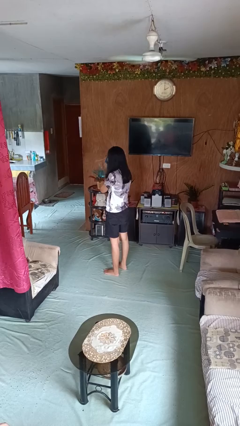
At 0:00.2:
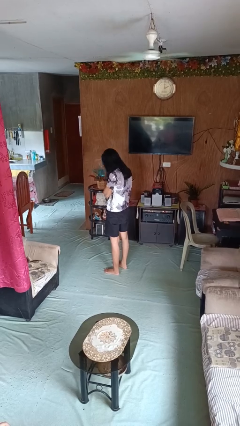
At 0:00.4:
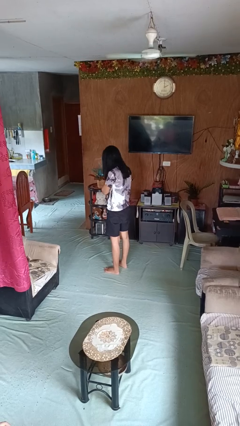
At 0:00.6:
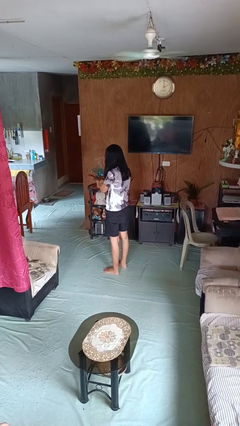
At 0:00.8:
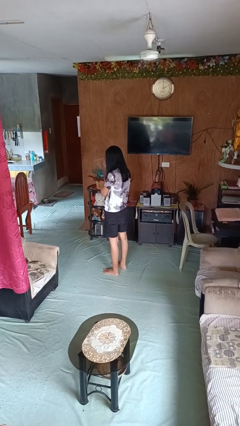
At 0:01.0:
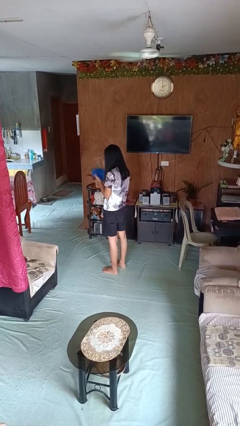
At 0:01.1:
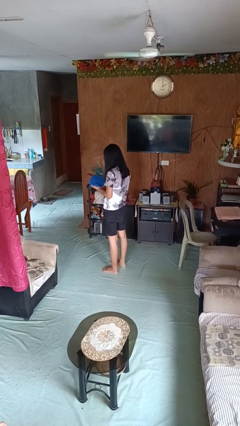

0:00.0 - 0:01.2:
person blows nose

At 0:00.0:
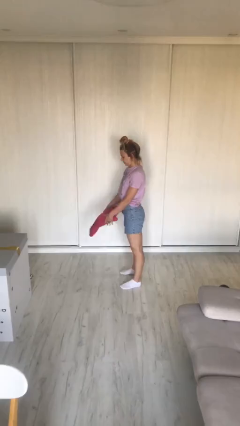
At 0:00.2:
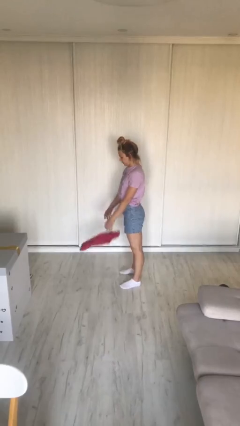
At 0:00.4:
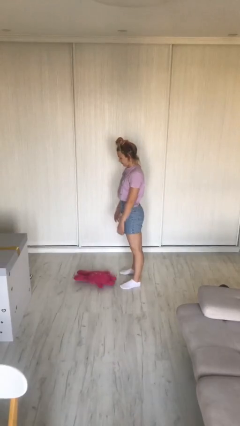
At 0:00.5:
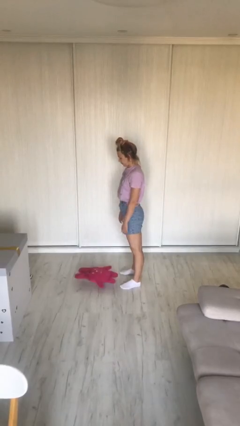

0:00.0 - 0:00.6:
person drops object

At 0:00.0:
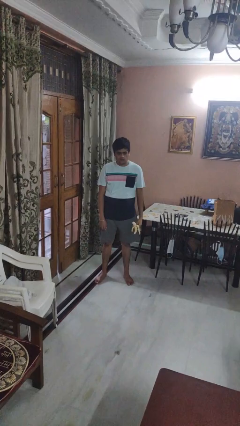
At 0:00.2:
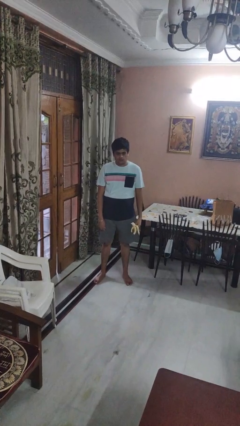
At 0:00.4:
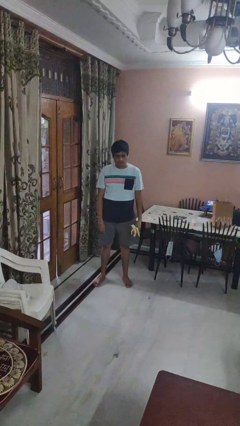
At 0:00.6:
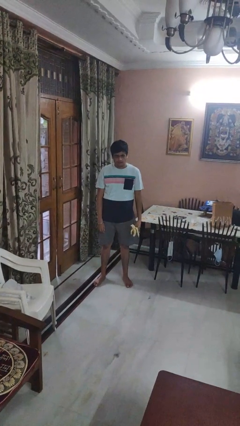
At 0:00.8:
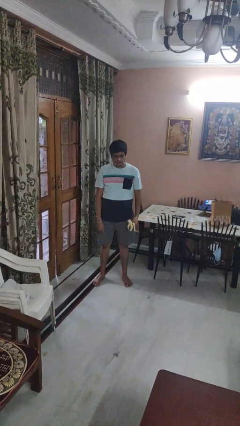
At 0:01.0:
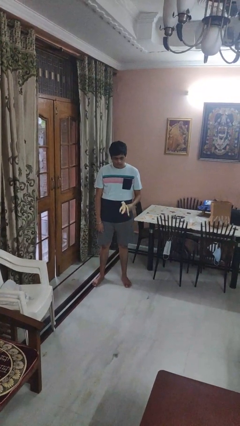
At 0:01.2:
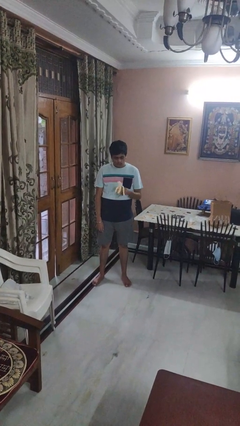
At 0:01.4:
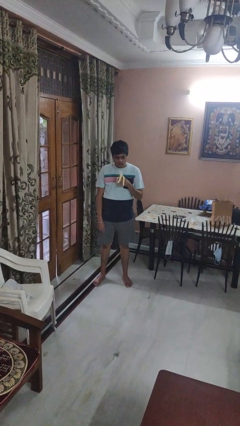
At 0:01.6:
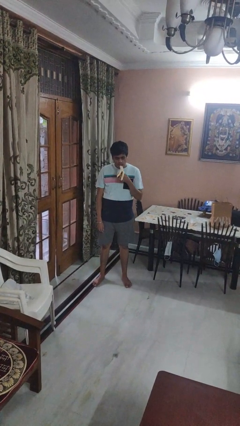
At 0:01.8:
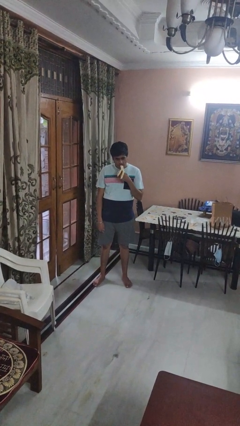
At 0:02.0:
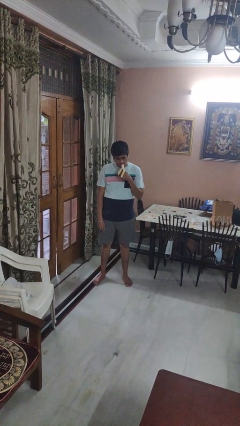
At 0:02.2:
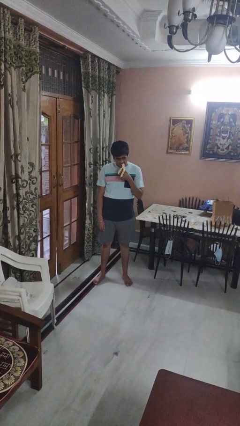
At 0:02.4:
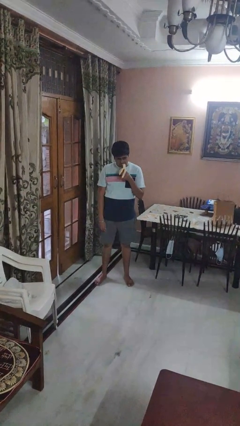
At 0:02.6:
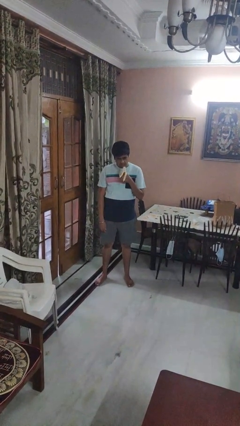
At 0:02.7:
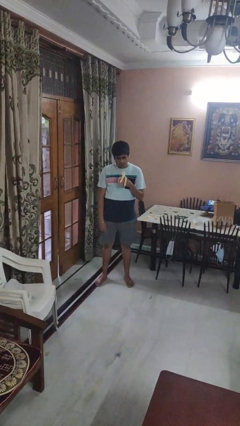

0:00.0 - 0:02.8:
person eats banana

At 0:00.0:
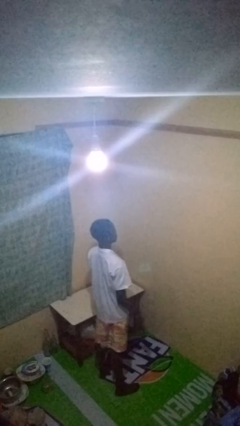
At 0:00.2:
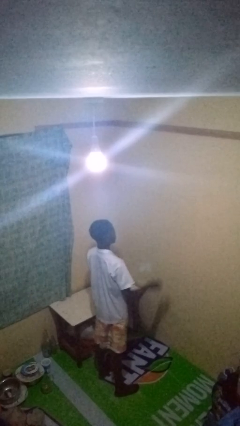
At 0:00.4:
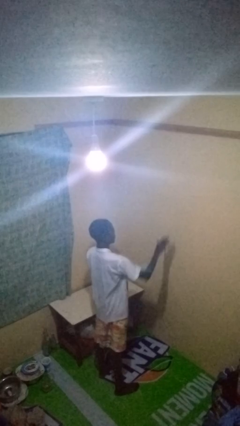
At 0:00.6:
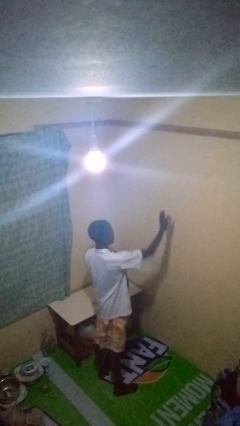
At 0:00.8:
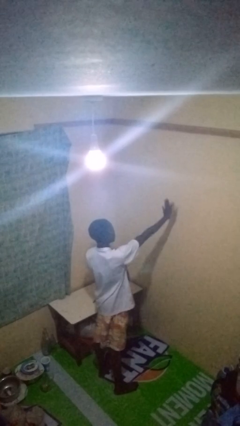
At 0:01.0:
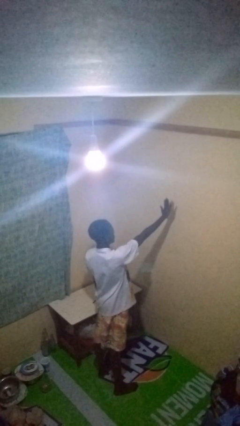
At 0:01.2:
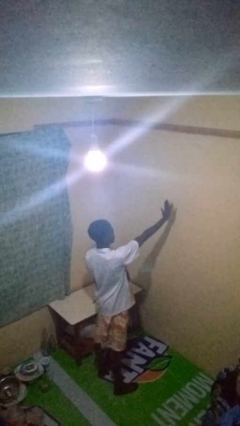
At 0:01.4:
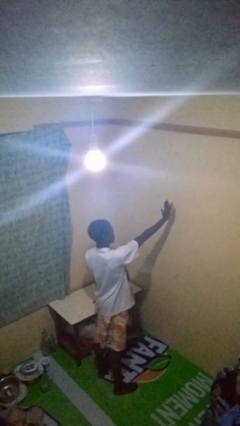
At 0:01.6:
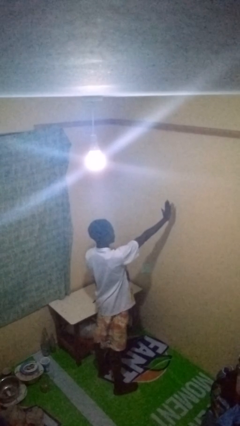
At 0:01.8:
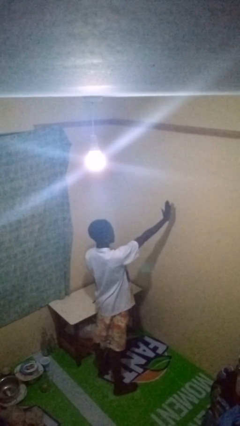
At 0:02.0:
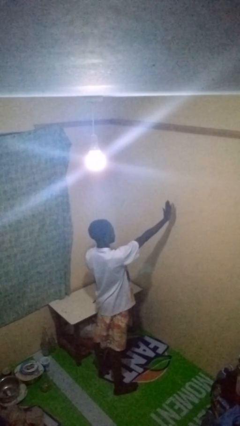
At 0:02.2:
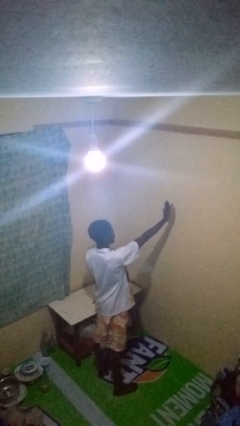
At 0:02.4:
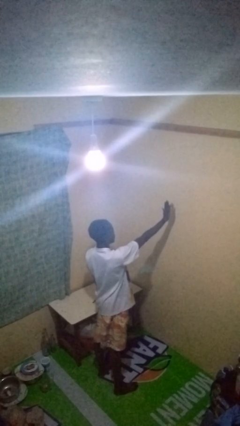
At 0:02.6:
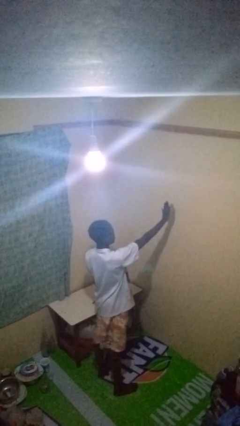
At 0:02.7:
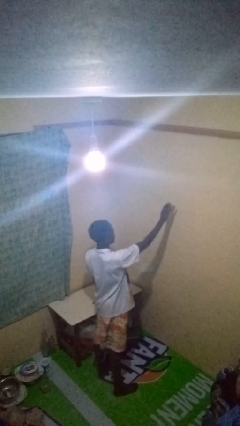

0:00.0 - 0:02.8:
person gestures stop

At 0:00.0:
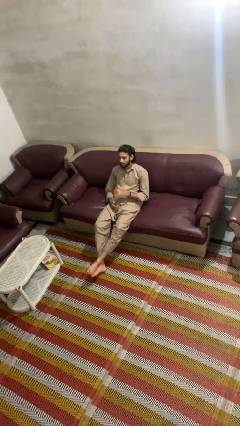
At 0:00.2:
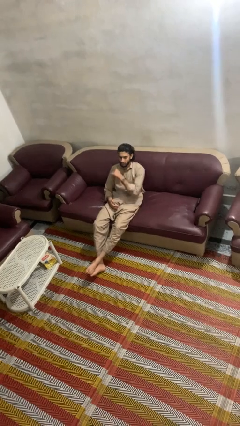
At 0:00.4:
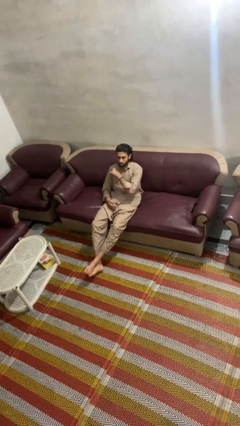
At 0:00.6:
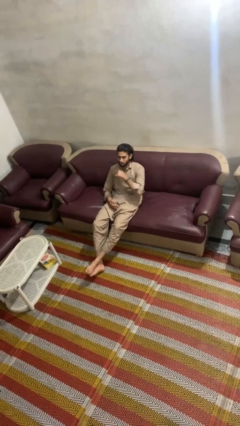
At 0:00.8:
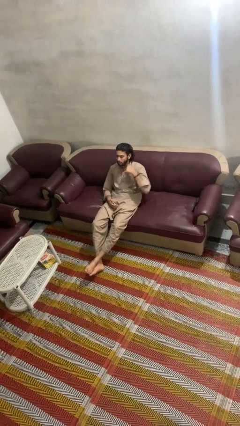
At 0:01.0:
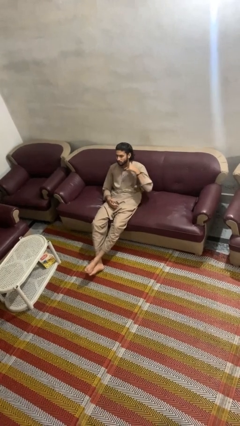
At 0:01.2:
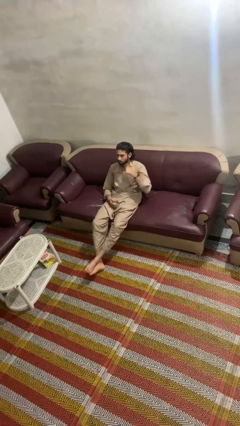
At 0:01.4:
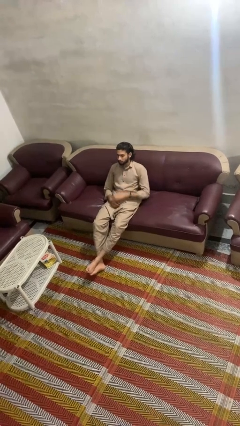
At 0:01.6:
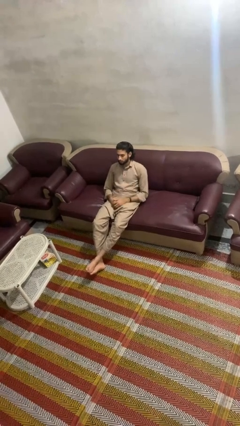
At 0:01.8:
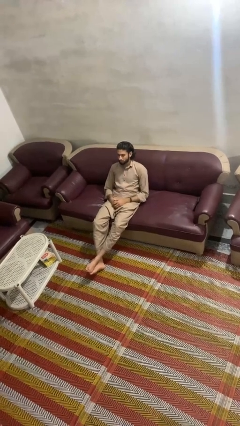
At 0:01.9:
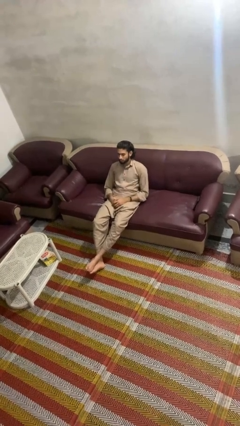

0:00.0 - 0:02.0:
person gestures cut

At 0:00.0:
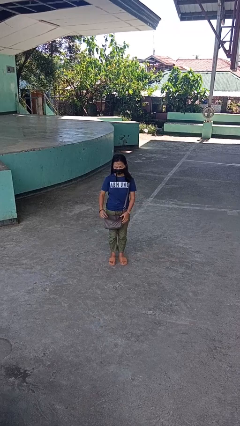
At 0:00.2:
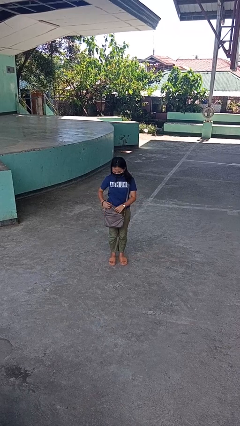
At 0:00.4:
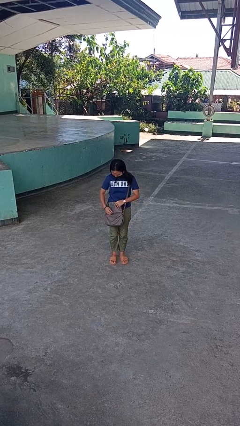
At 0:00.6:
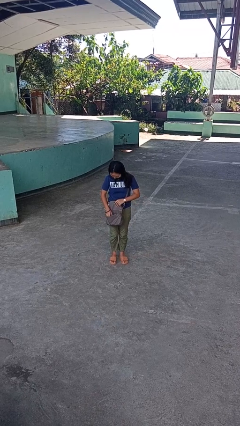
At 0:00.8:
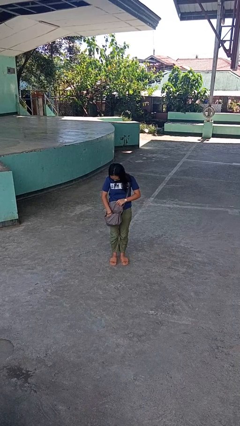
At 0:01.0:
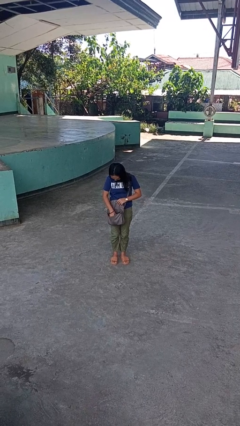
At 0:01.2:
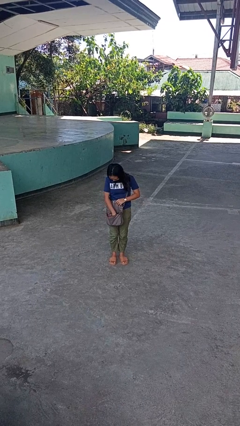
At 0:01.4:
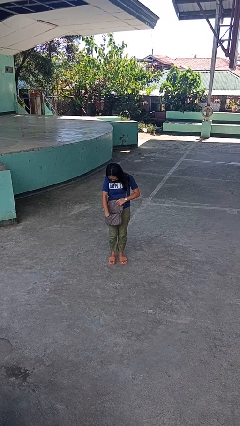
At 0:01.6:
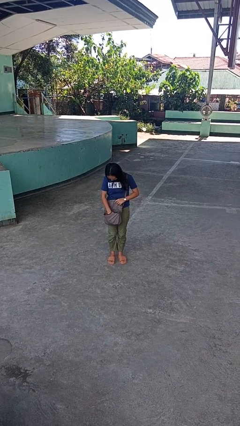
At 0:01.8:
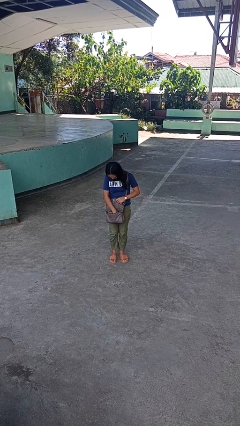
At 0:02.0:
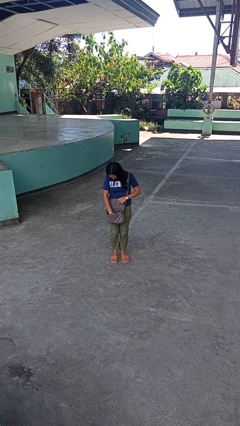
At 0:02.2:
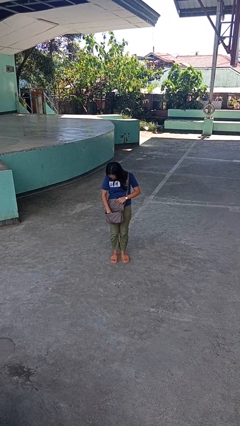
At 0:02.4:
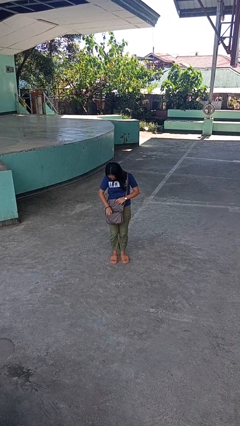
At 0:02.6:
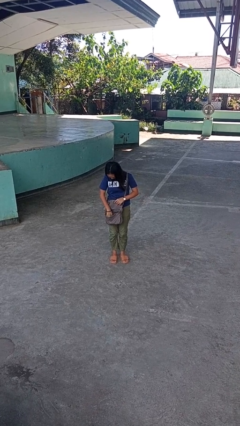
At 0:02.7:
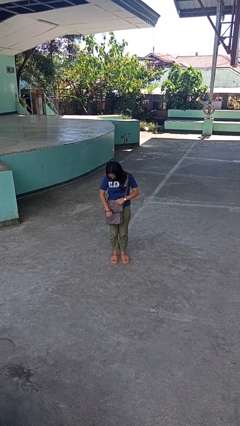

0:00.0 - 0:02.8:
person searches in purse

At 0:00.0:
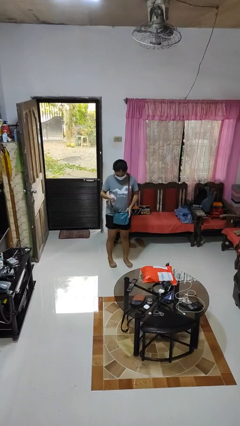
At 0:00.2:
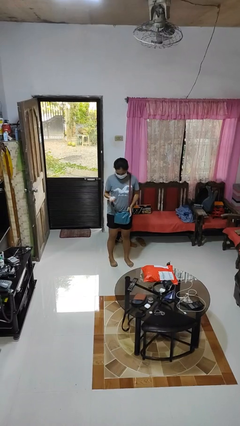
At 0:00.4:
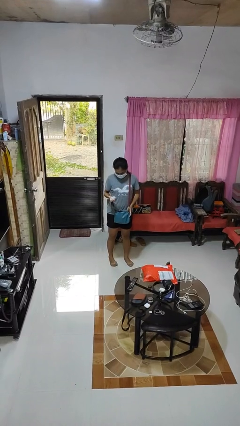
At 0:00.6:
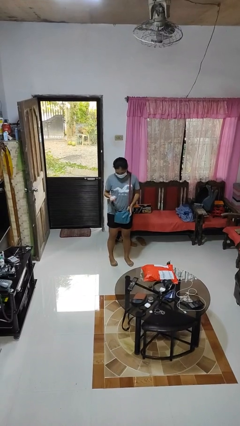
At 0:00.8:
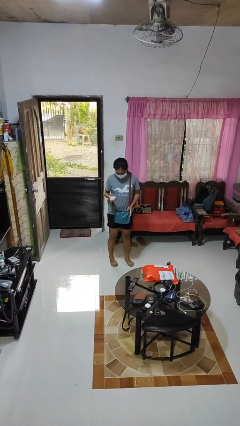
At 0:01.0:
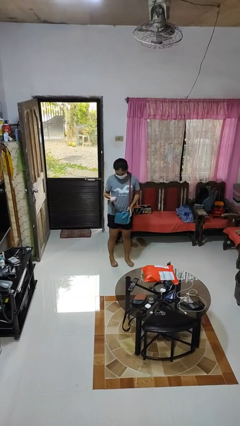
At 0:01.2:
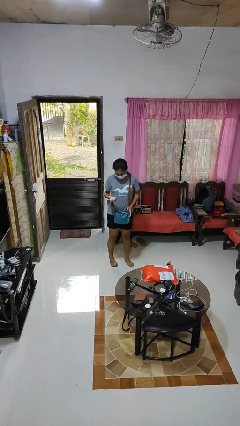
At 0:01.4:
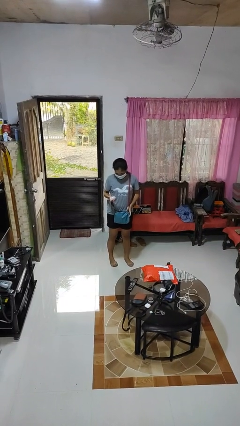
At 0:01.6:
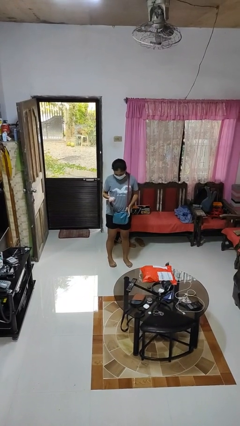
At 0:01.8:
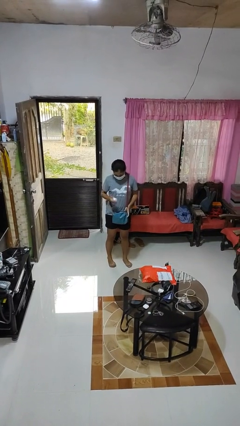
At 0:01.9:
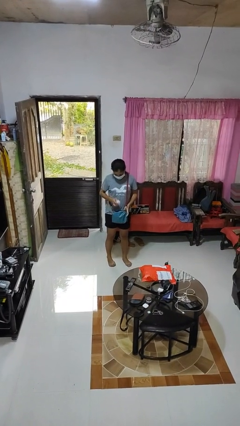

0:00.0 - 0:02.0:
person takes object from purse

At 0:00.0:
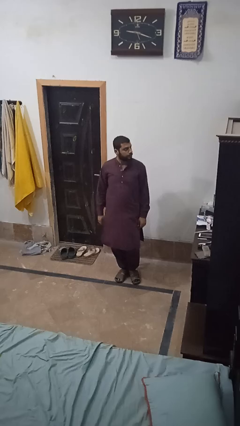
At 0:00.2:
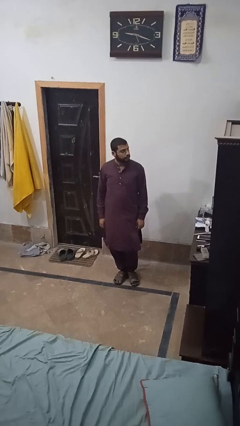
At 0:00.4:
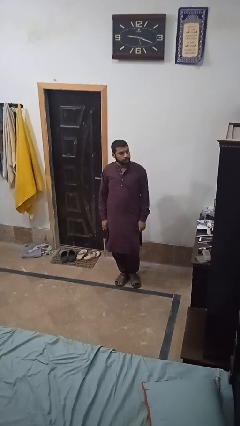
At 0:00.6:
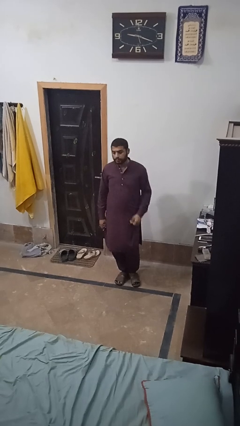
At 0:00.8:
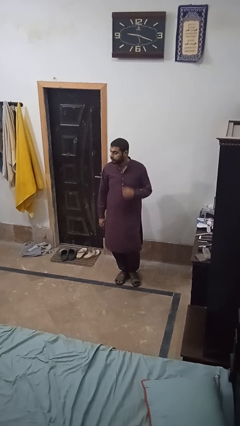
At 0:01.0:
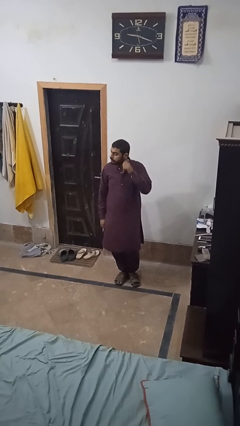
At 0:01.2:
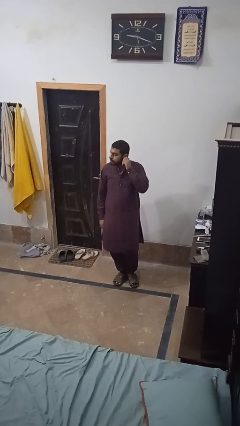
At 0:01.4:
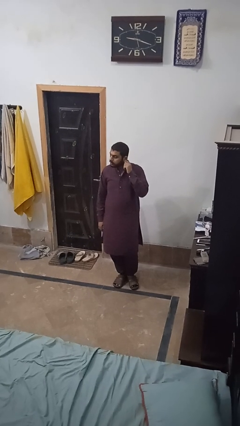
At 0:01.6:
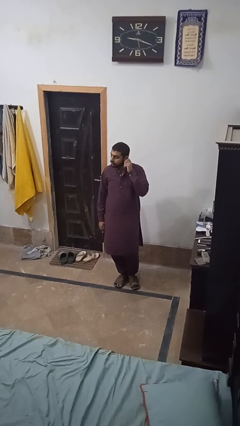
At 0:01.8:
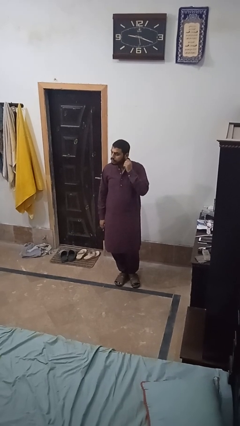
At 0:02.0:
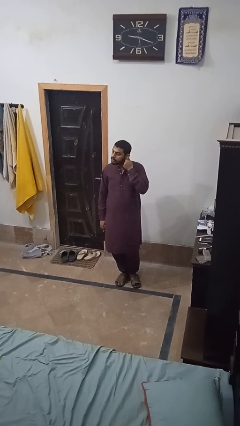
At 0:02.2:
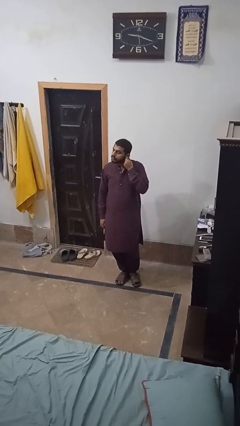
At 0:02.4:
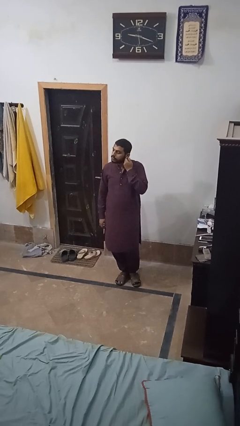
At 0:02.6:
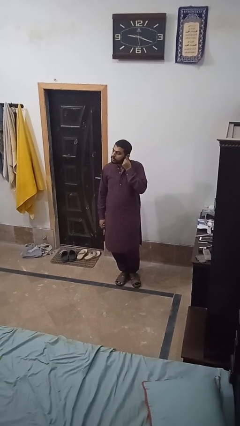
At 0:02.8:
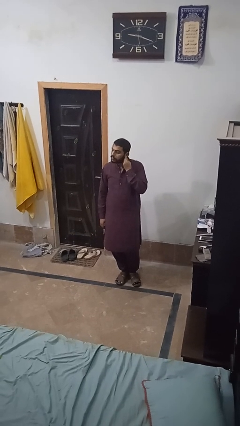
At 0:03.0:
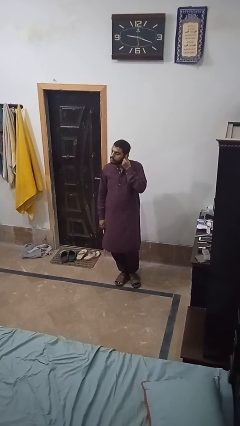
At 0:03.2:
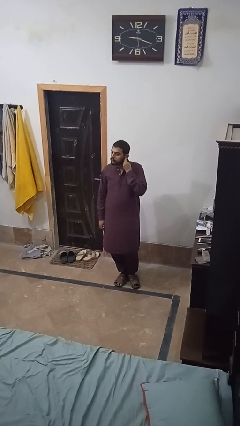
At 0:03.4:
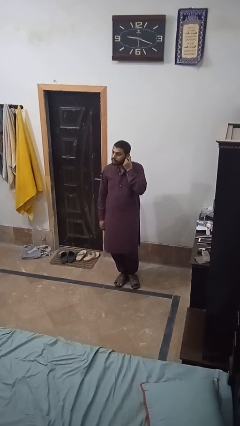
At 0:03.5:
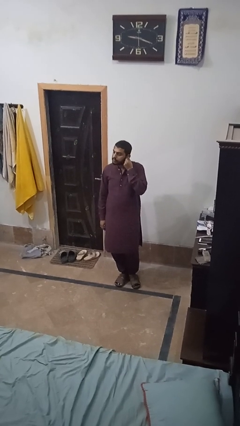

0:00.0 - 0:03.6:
person touches earlobe
